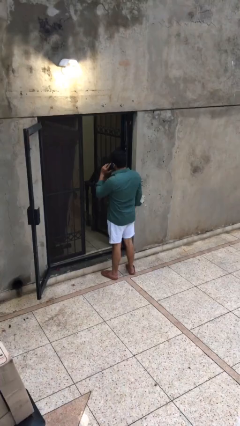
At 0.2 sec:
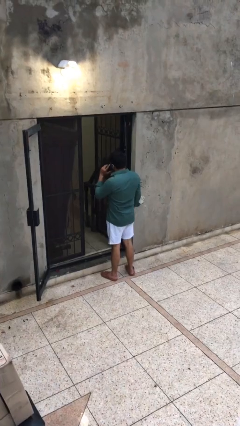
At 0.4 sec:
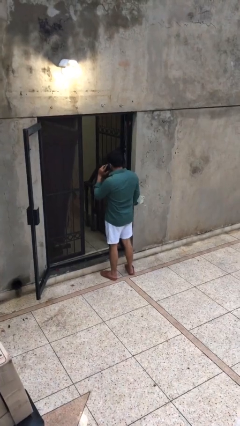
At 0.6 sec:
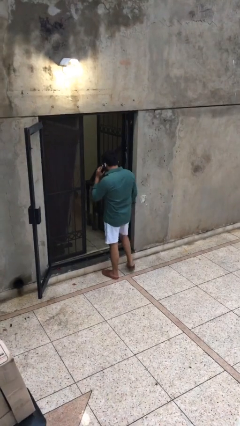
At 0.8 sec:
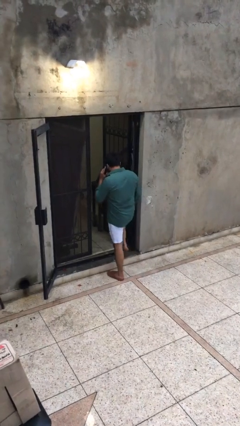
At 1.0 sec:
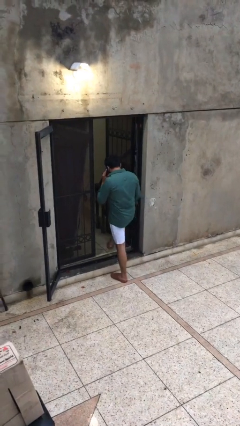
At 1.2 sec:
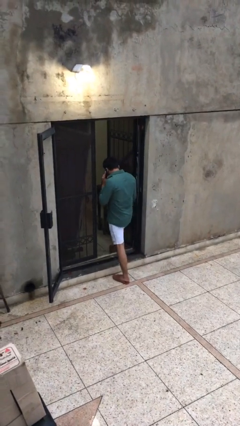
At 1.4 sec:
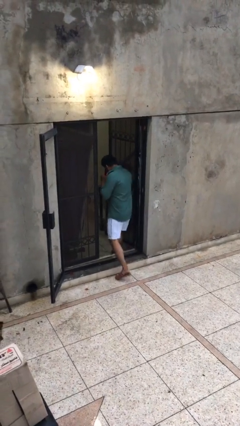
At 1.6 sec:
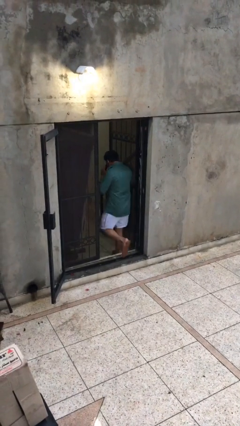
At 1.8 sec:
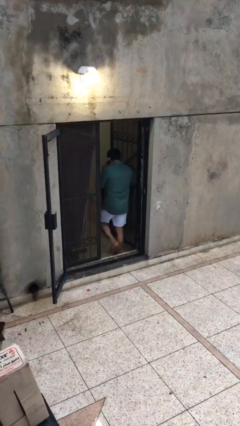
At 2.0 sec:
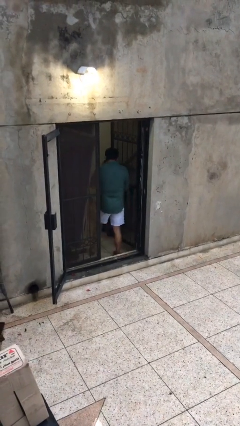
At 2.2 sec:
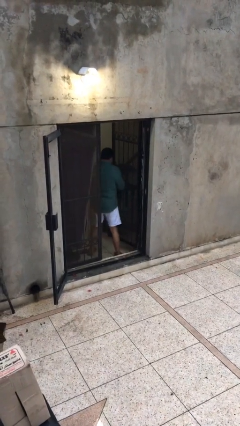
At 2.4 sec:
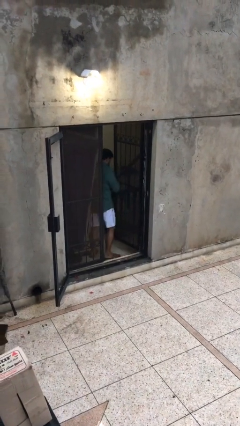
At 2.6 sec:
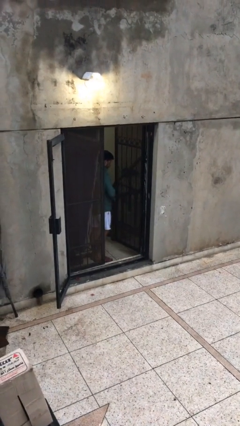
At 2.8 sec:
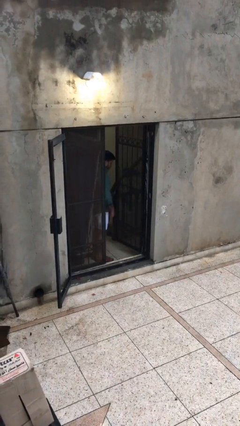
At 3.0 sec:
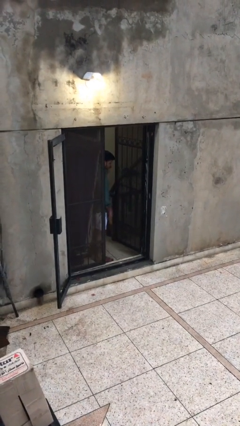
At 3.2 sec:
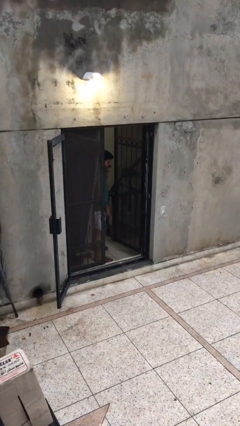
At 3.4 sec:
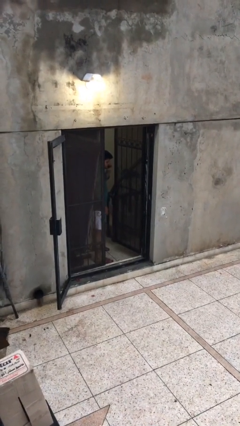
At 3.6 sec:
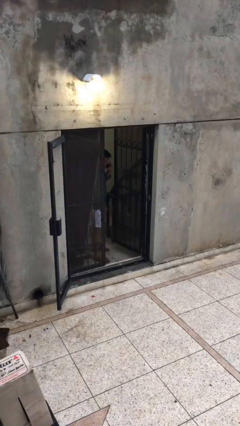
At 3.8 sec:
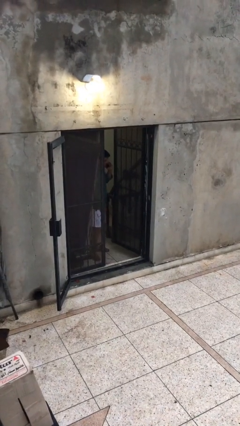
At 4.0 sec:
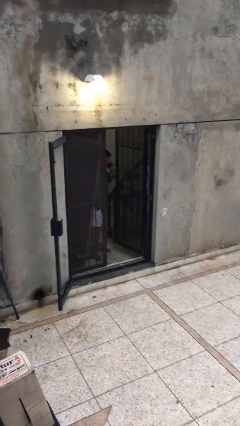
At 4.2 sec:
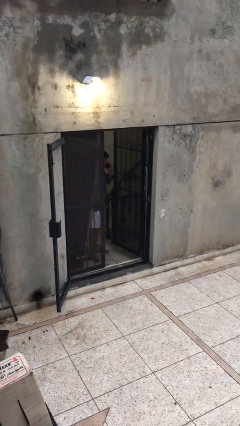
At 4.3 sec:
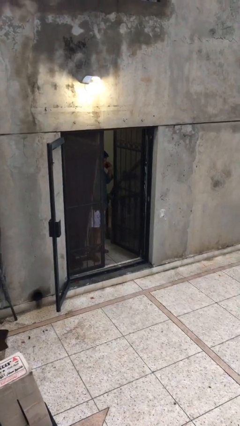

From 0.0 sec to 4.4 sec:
person exits scene through structure

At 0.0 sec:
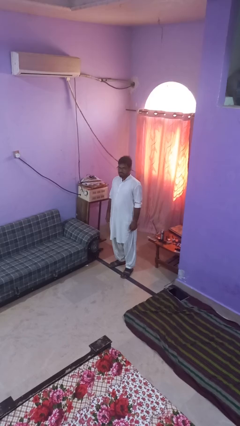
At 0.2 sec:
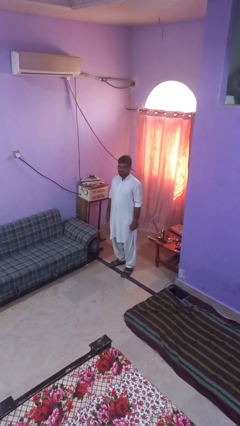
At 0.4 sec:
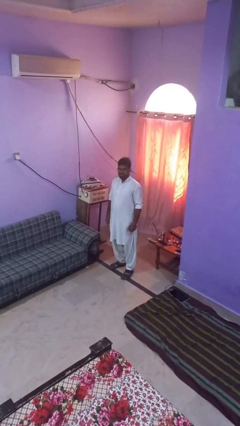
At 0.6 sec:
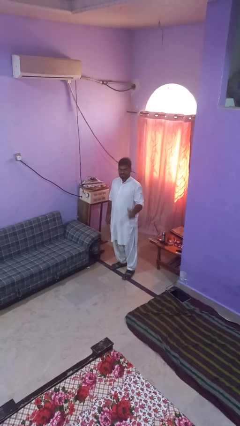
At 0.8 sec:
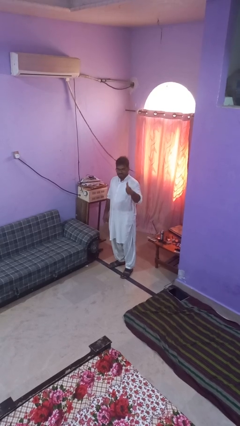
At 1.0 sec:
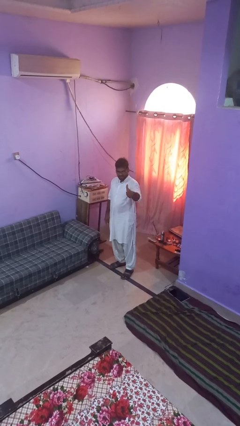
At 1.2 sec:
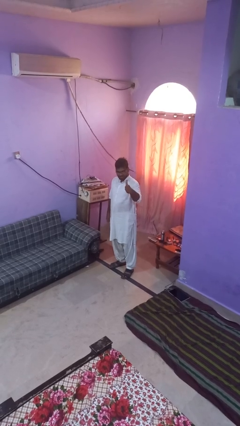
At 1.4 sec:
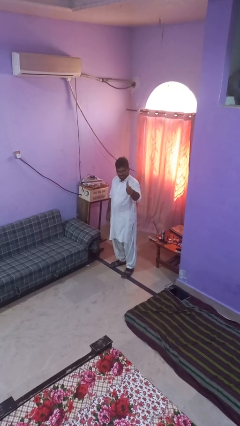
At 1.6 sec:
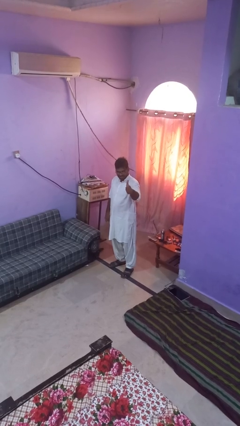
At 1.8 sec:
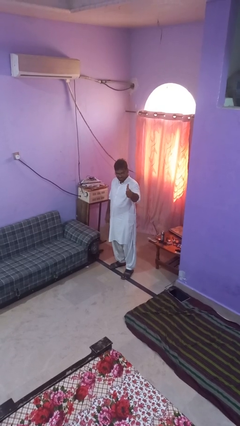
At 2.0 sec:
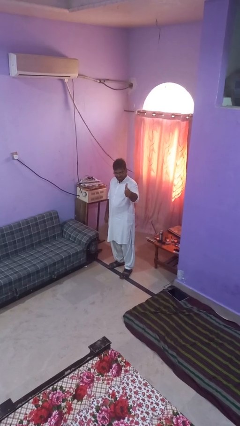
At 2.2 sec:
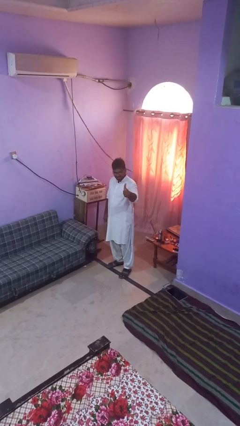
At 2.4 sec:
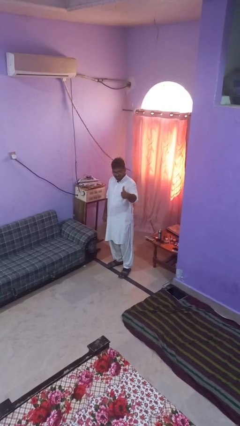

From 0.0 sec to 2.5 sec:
person gestures thumbs up

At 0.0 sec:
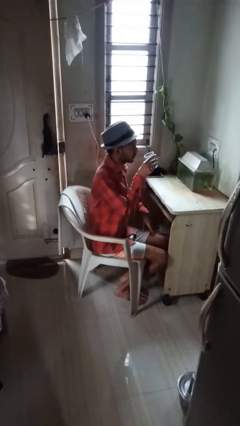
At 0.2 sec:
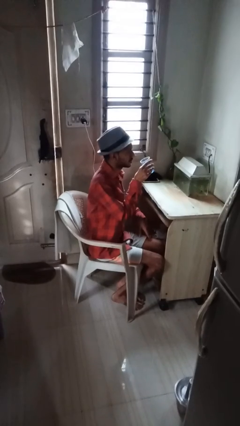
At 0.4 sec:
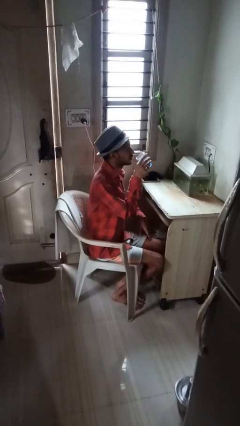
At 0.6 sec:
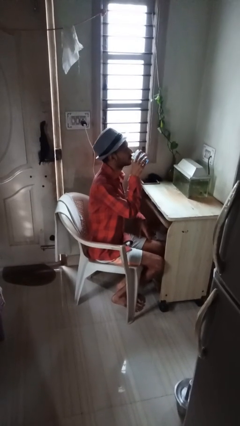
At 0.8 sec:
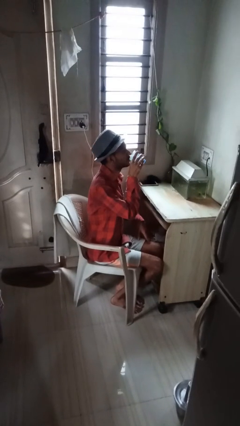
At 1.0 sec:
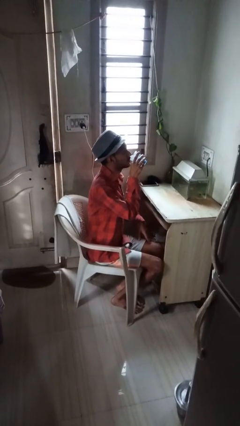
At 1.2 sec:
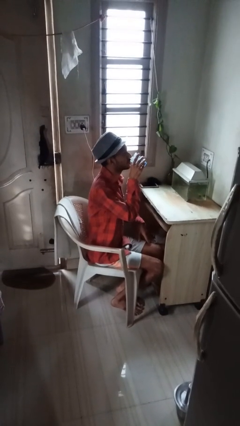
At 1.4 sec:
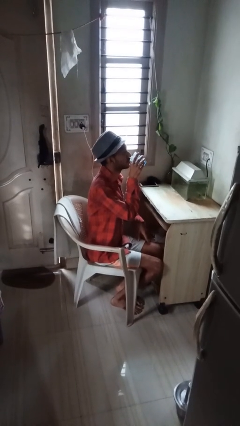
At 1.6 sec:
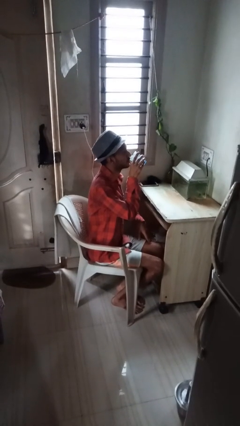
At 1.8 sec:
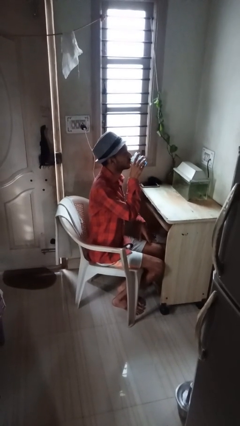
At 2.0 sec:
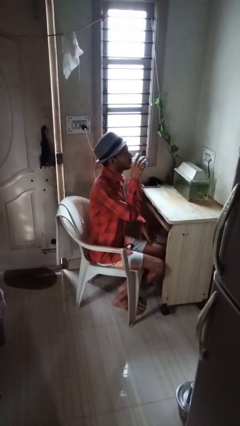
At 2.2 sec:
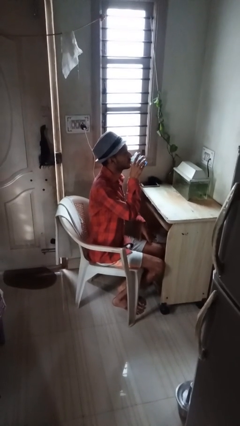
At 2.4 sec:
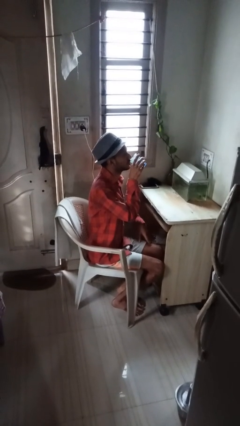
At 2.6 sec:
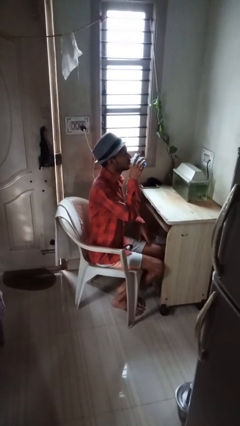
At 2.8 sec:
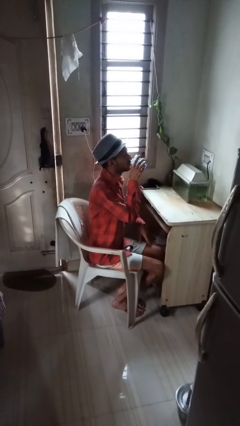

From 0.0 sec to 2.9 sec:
person drinks from shotglass

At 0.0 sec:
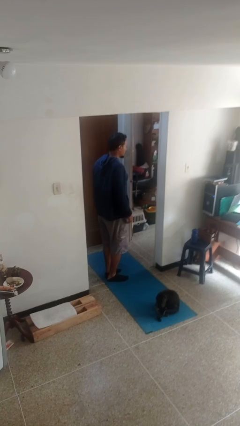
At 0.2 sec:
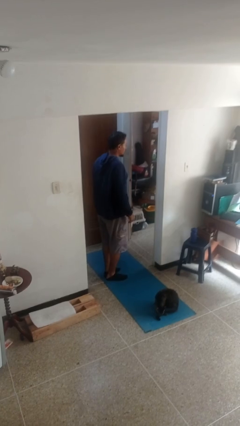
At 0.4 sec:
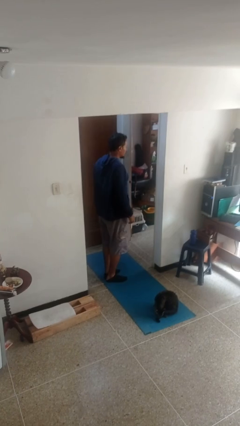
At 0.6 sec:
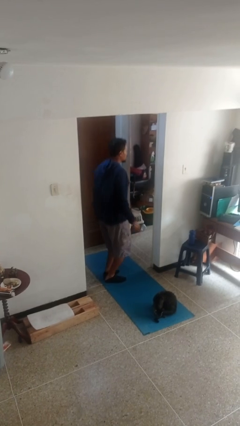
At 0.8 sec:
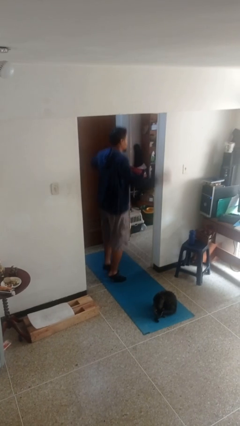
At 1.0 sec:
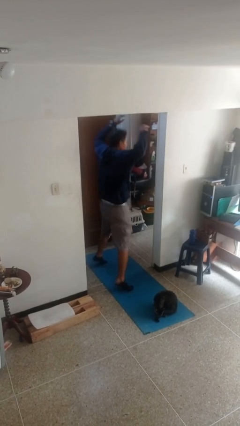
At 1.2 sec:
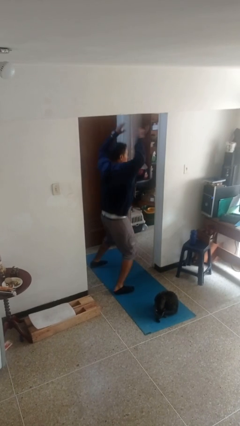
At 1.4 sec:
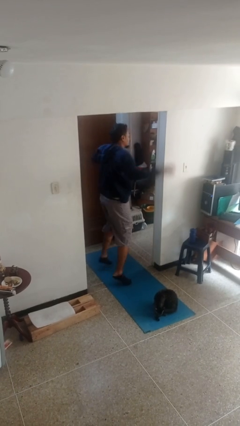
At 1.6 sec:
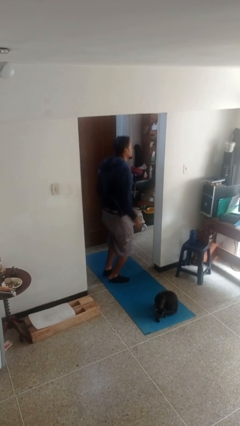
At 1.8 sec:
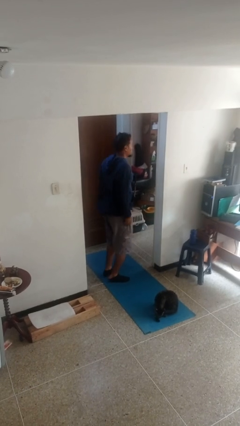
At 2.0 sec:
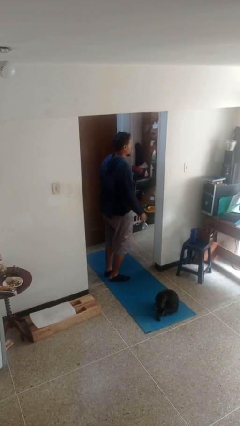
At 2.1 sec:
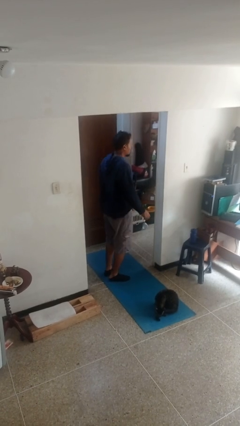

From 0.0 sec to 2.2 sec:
person exercises with jumping jacks

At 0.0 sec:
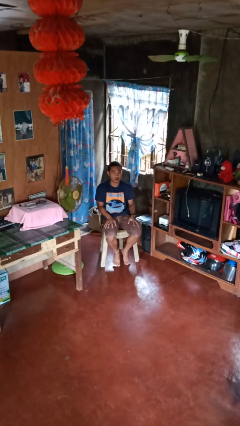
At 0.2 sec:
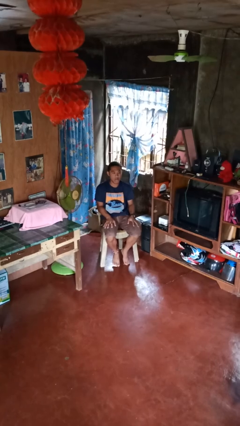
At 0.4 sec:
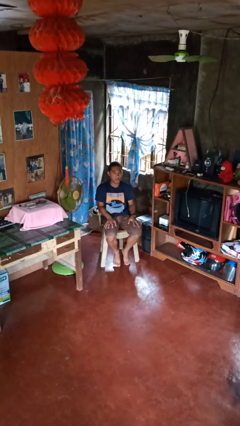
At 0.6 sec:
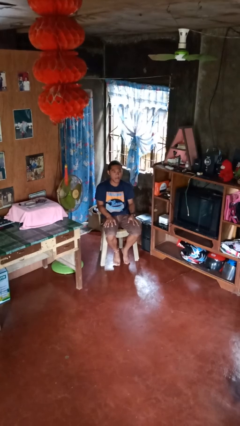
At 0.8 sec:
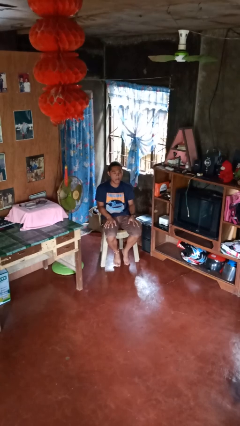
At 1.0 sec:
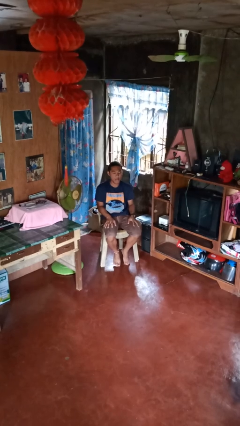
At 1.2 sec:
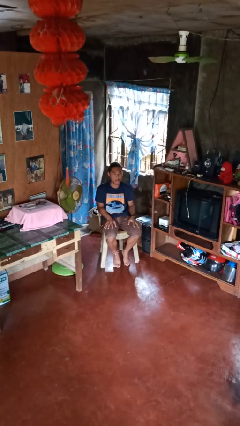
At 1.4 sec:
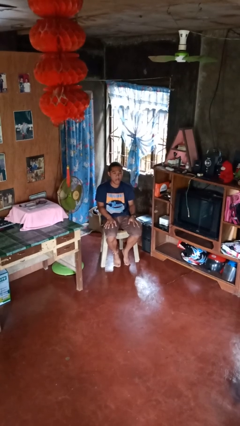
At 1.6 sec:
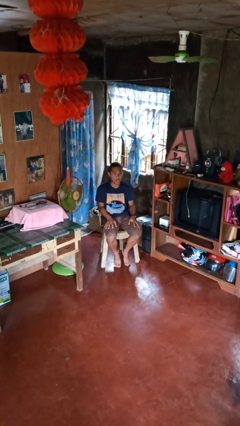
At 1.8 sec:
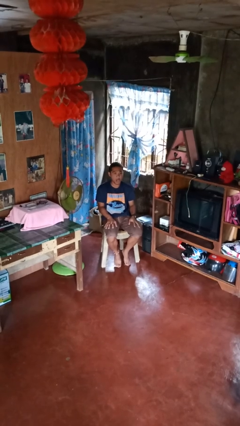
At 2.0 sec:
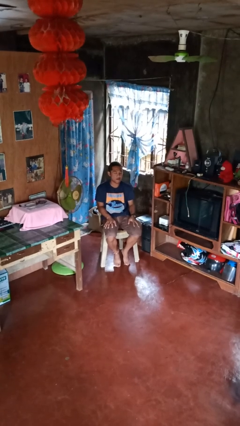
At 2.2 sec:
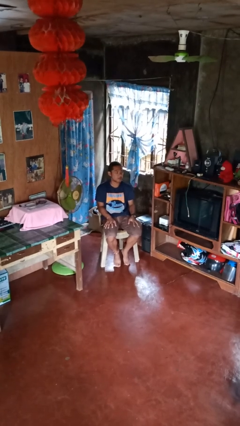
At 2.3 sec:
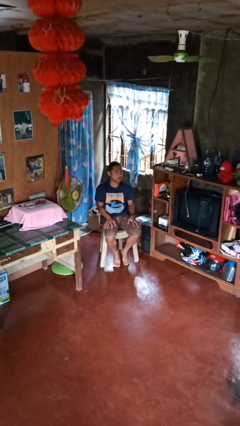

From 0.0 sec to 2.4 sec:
person sticks out tongue

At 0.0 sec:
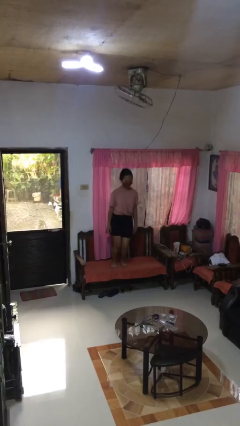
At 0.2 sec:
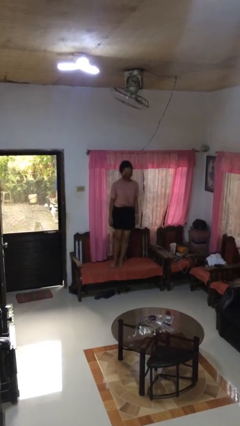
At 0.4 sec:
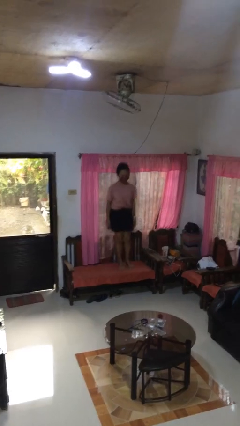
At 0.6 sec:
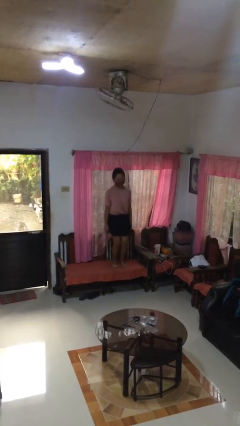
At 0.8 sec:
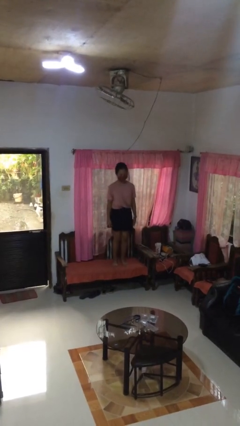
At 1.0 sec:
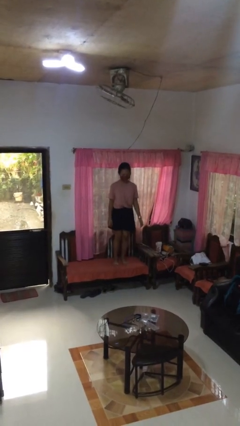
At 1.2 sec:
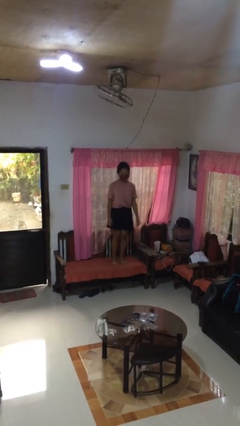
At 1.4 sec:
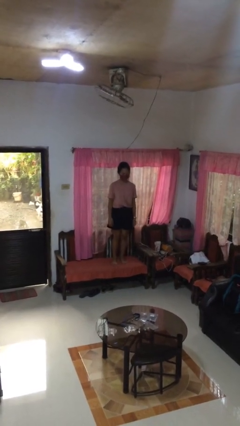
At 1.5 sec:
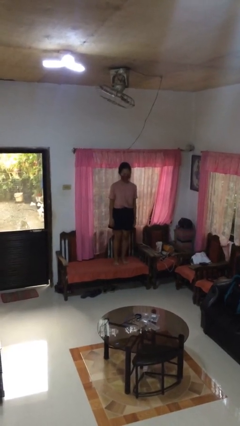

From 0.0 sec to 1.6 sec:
person jumps on couch

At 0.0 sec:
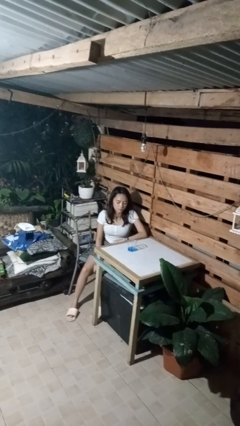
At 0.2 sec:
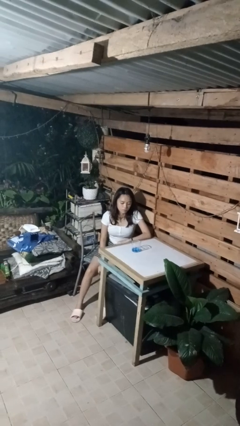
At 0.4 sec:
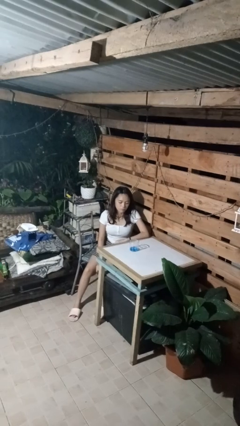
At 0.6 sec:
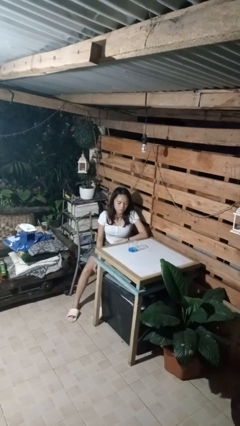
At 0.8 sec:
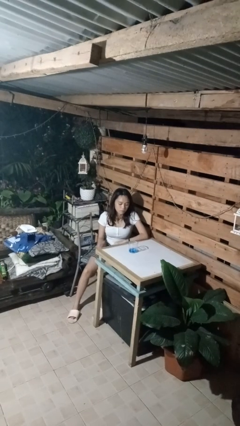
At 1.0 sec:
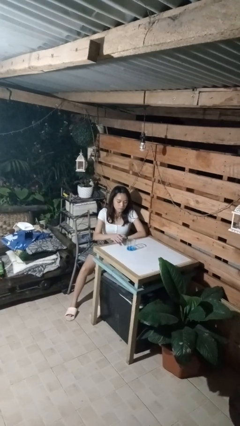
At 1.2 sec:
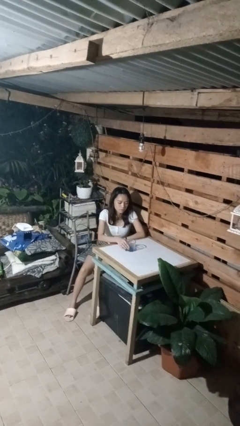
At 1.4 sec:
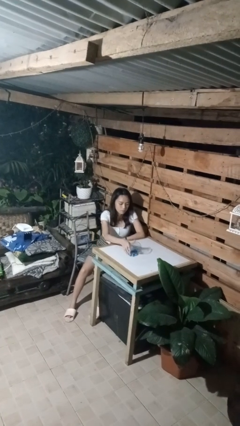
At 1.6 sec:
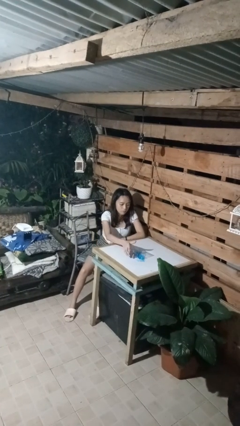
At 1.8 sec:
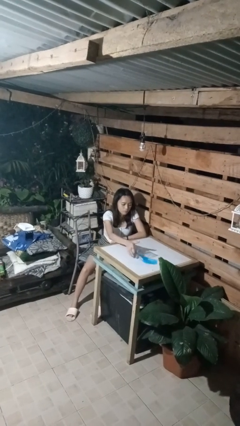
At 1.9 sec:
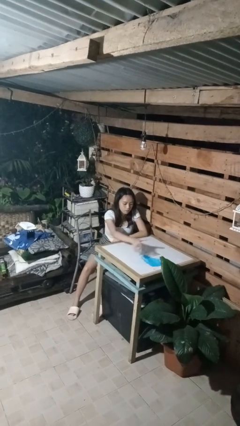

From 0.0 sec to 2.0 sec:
person spills on table
